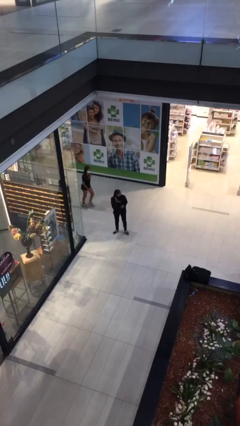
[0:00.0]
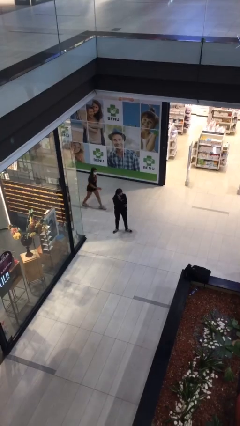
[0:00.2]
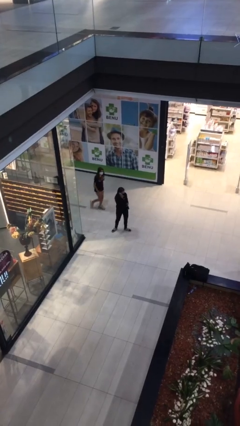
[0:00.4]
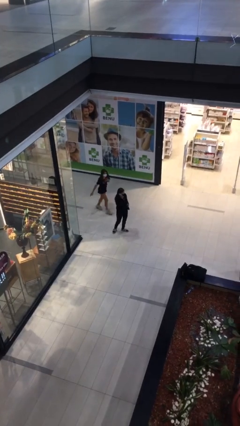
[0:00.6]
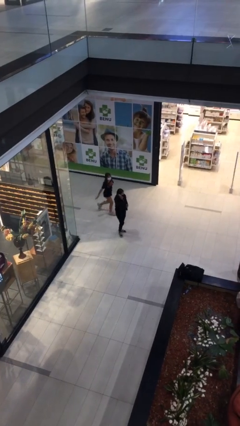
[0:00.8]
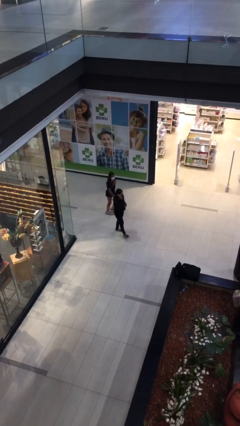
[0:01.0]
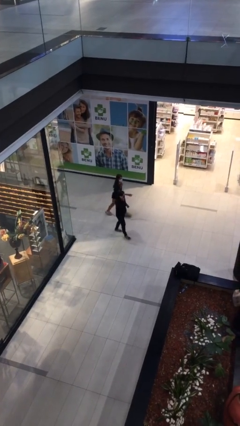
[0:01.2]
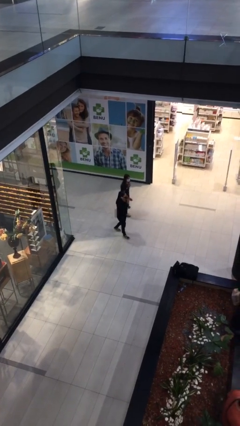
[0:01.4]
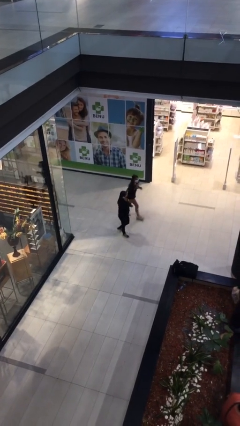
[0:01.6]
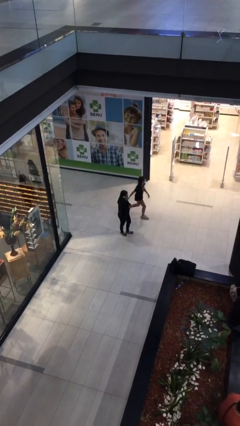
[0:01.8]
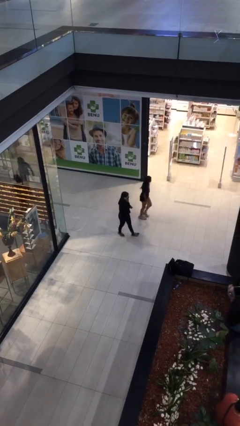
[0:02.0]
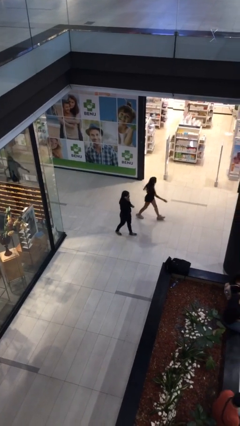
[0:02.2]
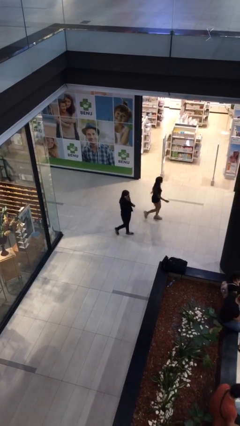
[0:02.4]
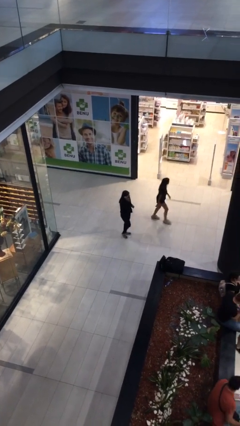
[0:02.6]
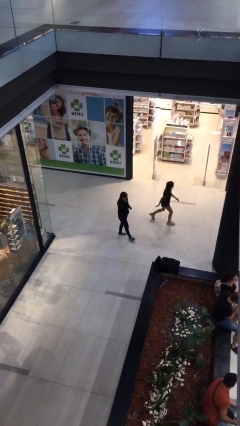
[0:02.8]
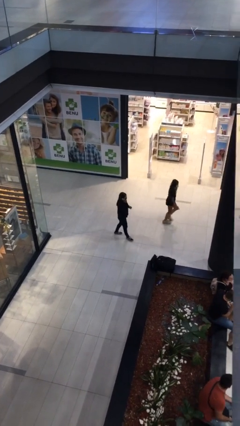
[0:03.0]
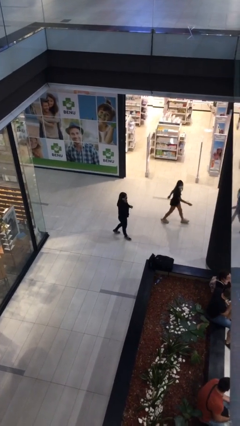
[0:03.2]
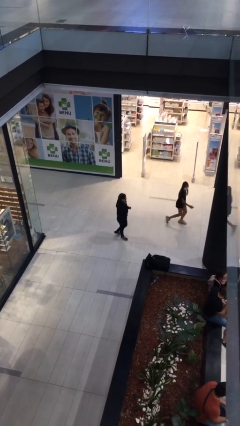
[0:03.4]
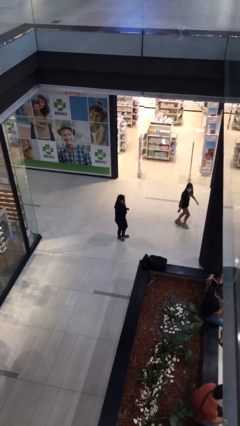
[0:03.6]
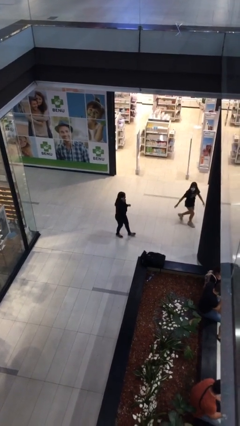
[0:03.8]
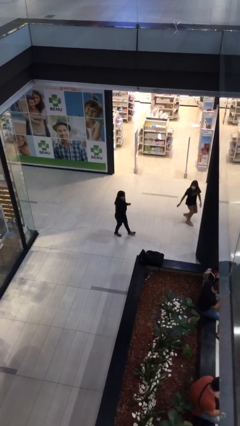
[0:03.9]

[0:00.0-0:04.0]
person talks on phone

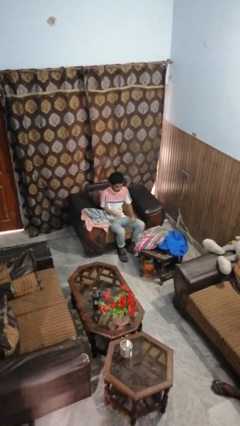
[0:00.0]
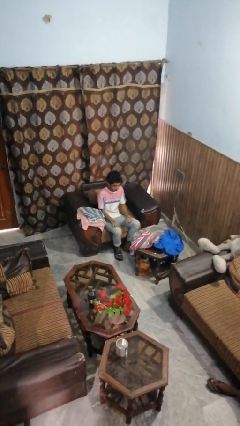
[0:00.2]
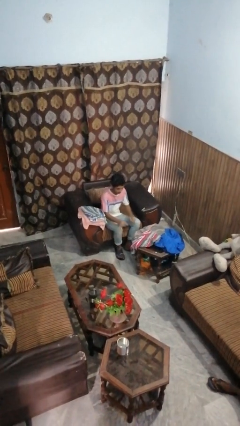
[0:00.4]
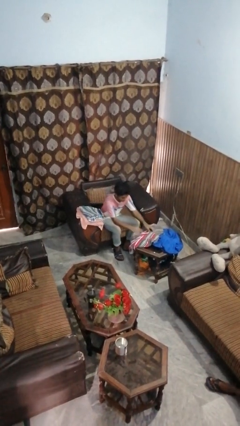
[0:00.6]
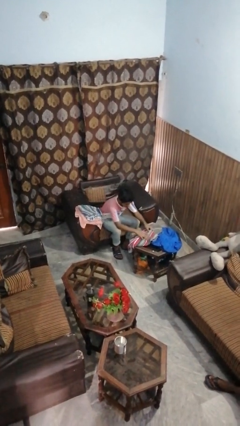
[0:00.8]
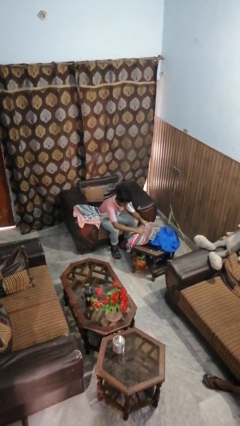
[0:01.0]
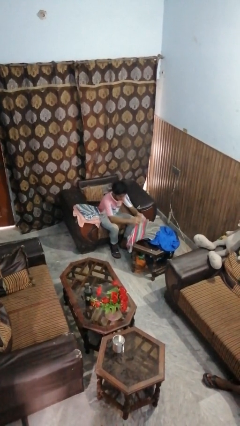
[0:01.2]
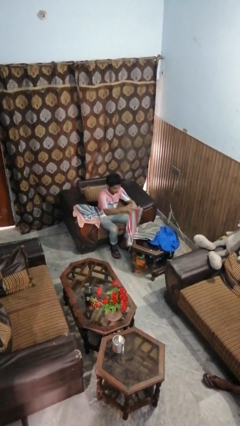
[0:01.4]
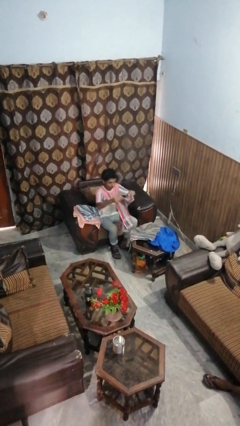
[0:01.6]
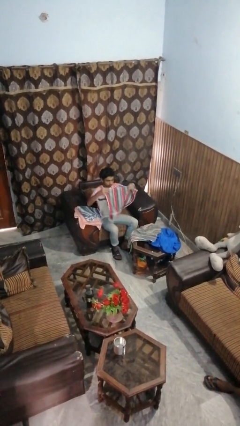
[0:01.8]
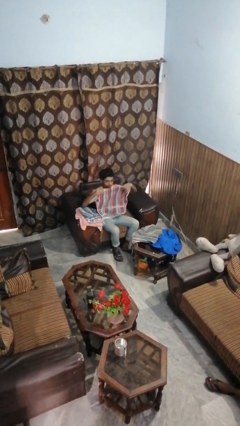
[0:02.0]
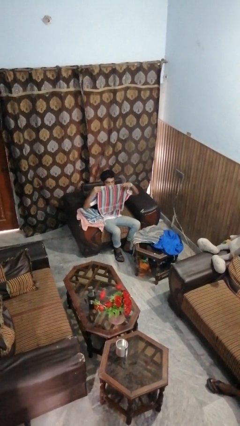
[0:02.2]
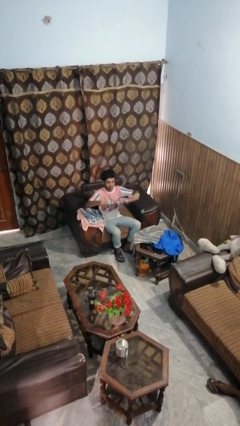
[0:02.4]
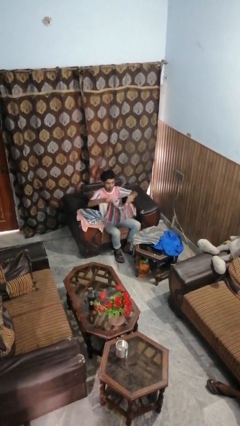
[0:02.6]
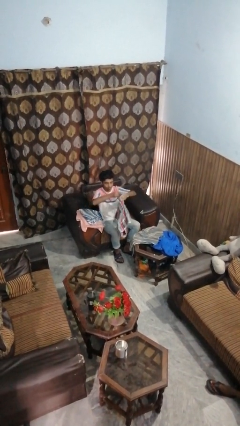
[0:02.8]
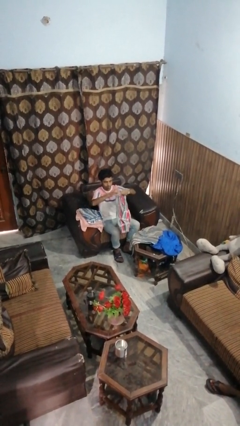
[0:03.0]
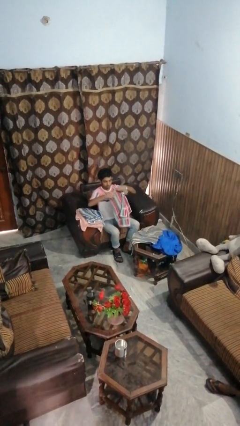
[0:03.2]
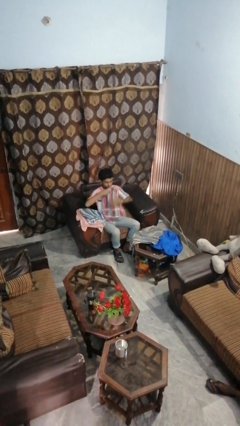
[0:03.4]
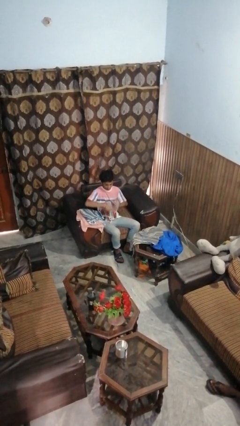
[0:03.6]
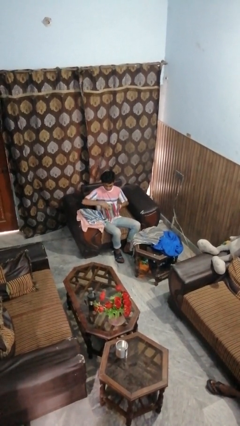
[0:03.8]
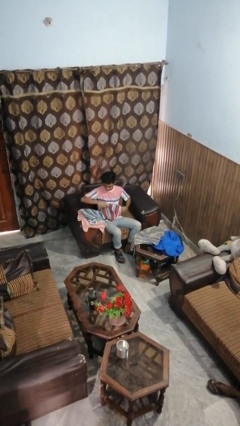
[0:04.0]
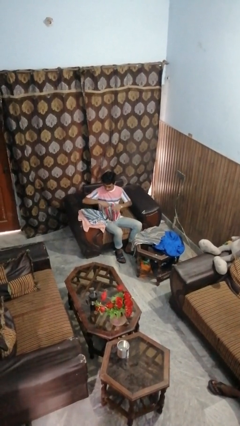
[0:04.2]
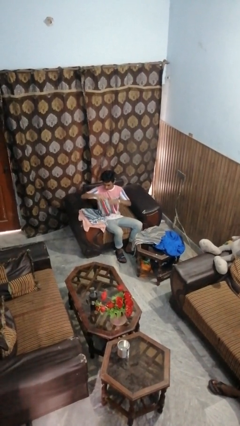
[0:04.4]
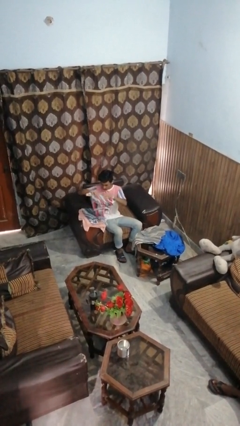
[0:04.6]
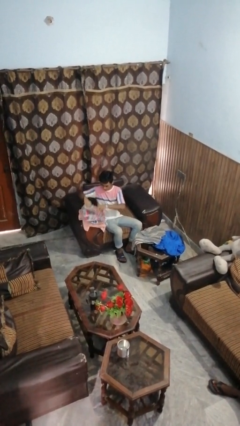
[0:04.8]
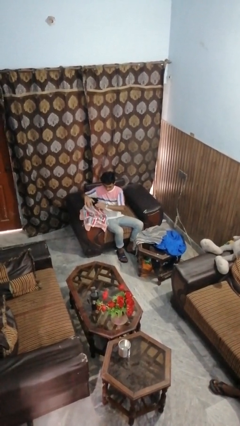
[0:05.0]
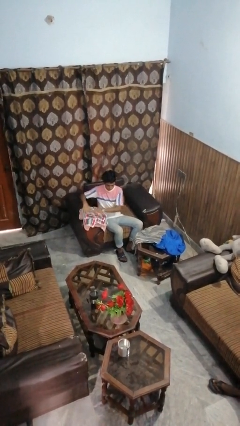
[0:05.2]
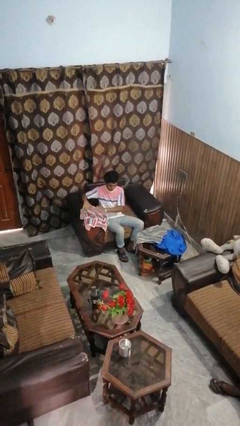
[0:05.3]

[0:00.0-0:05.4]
person folds towel

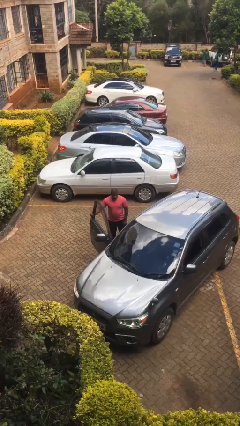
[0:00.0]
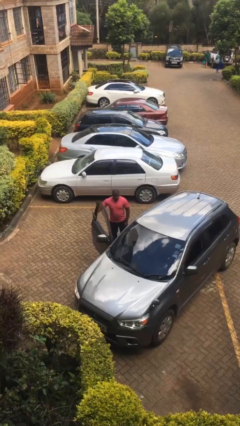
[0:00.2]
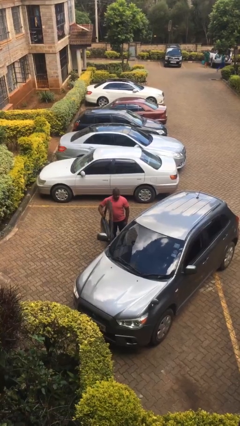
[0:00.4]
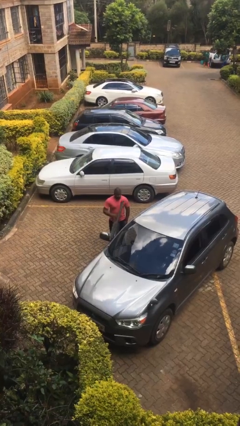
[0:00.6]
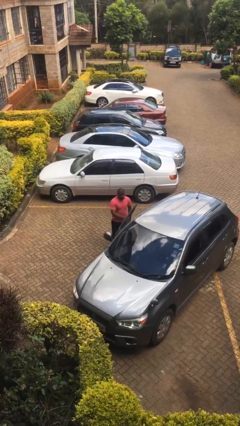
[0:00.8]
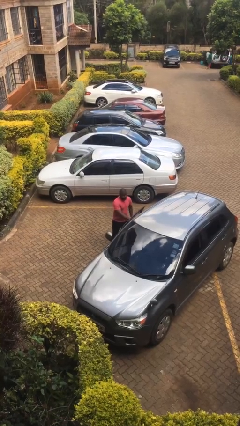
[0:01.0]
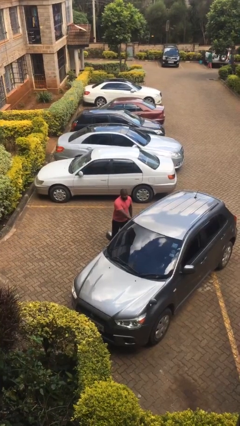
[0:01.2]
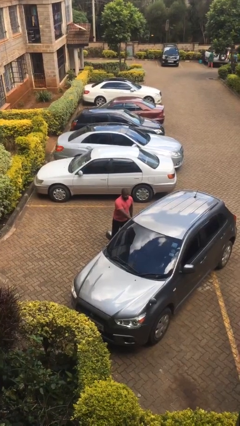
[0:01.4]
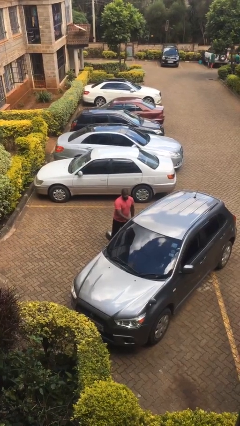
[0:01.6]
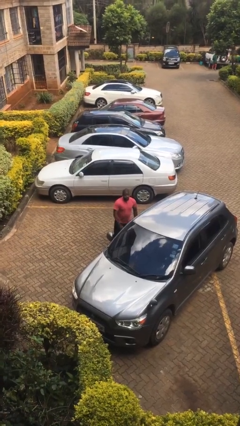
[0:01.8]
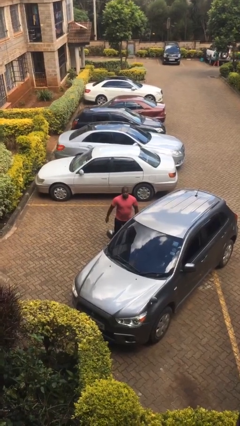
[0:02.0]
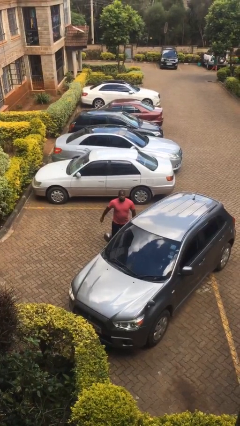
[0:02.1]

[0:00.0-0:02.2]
person closes car door

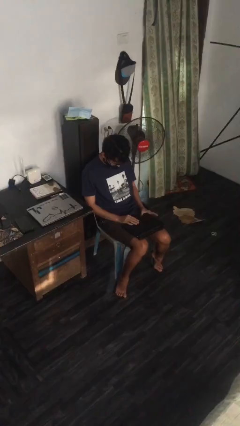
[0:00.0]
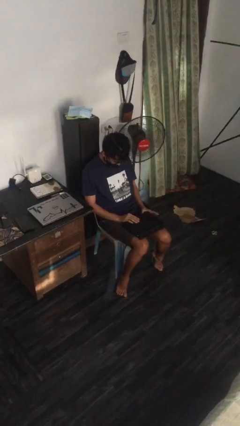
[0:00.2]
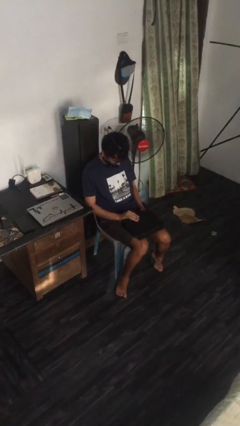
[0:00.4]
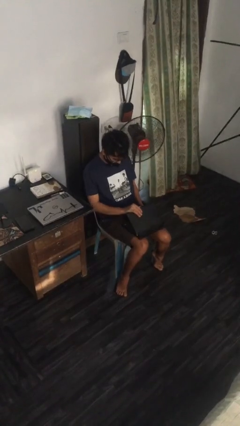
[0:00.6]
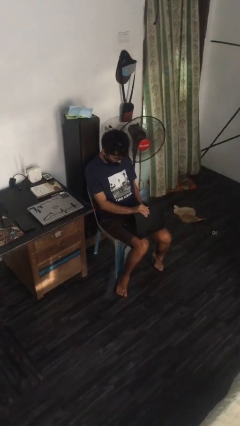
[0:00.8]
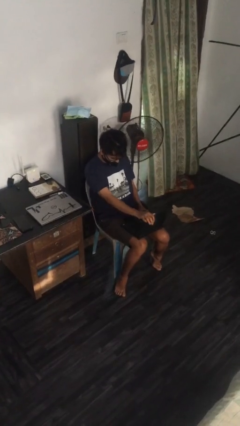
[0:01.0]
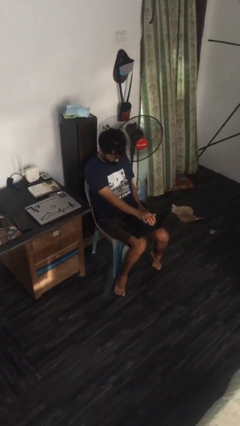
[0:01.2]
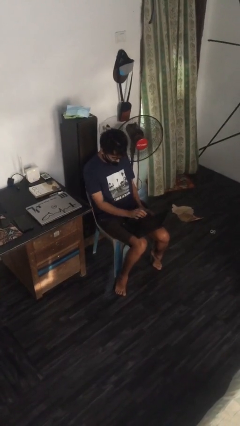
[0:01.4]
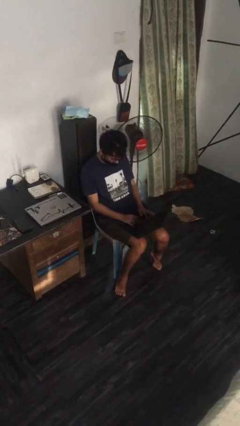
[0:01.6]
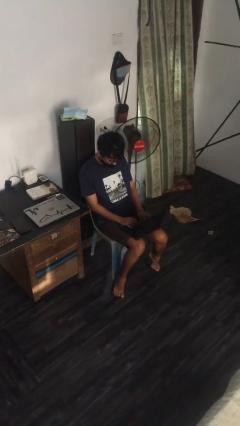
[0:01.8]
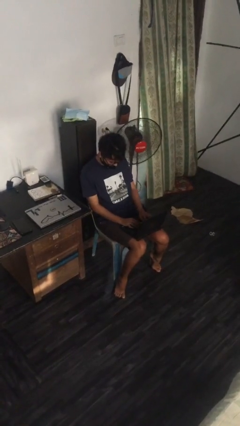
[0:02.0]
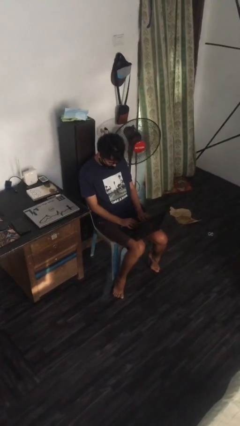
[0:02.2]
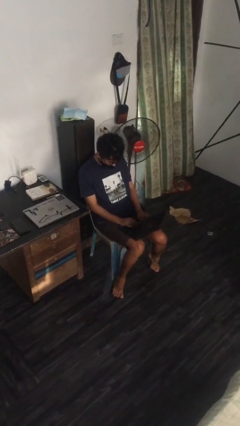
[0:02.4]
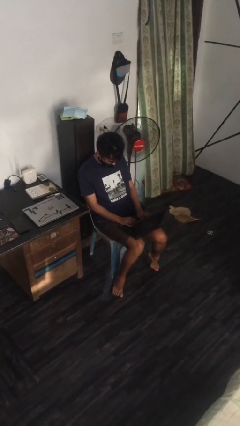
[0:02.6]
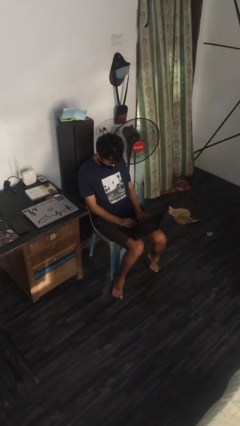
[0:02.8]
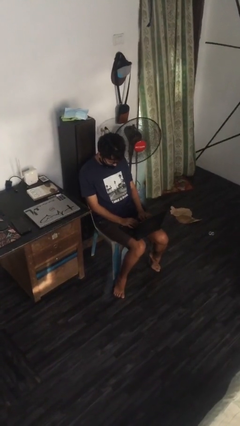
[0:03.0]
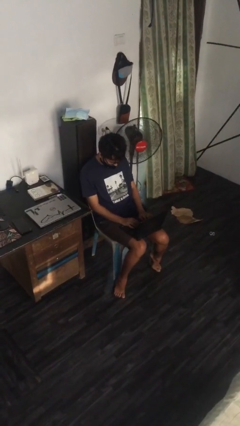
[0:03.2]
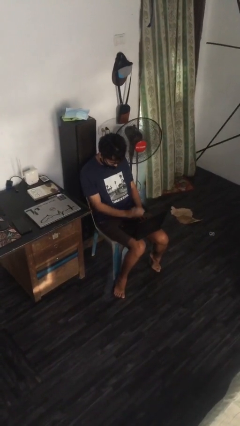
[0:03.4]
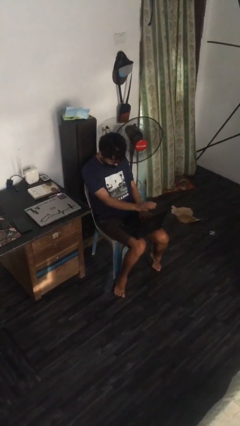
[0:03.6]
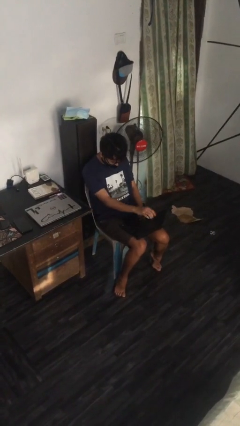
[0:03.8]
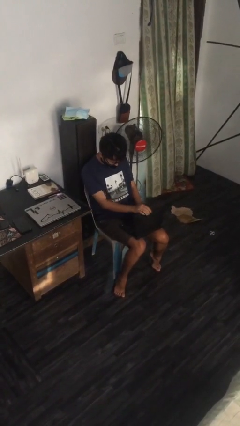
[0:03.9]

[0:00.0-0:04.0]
person interacts with laptop

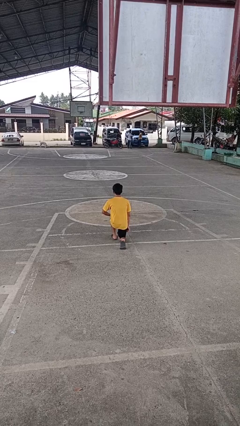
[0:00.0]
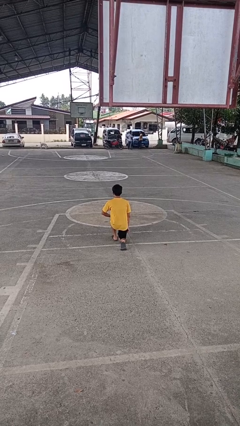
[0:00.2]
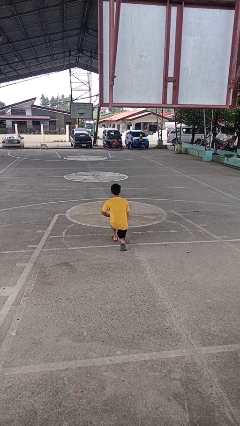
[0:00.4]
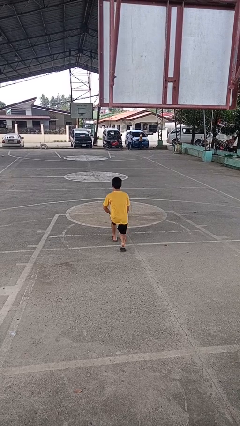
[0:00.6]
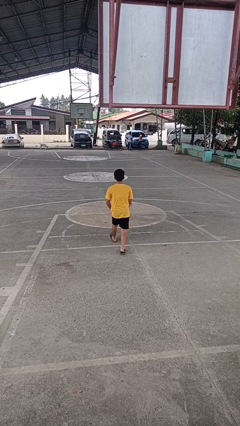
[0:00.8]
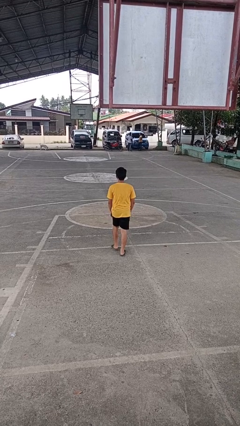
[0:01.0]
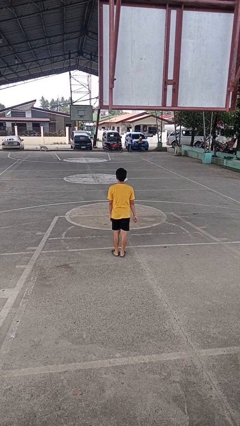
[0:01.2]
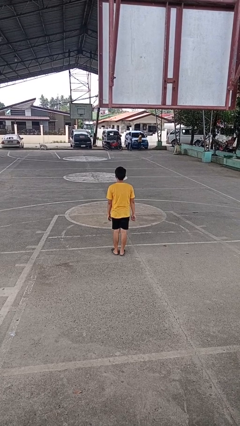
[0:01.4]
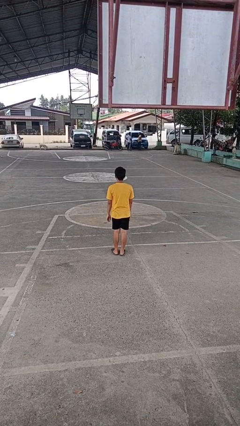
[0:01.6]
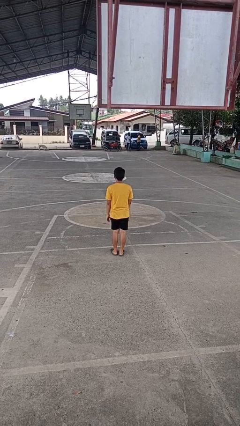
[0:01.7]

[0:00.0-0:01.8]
person stands up from floor

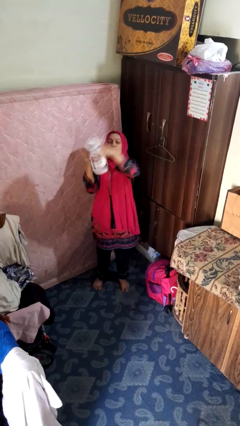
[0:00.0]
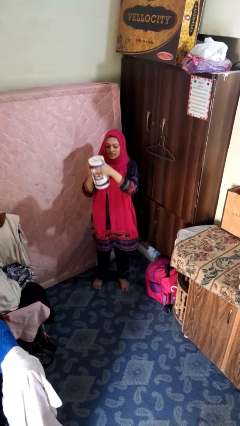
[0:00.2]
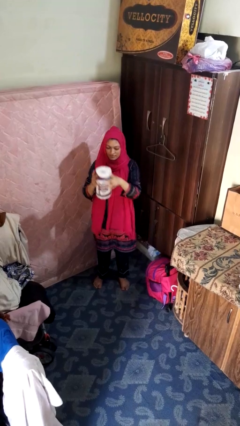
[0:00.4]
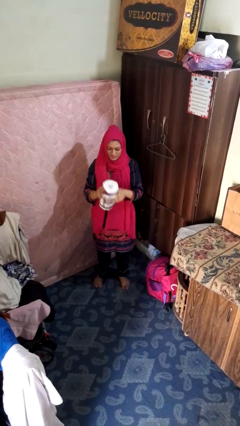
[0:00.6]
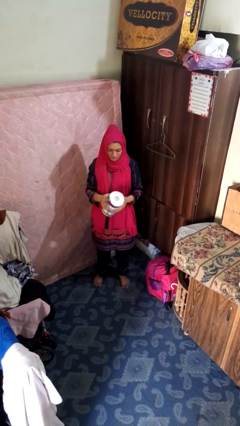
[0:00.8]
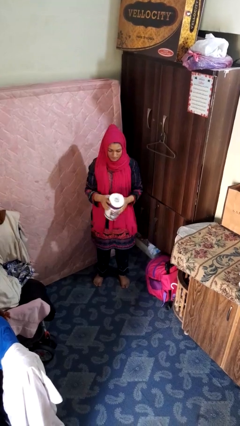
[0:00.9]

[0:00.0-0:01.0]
person catches dropped object
